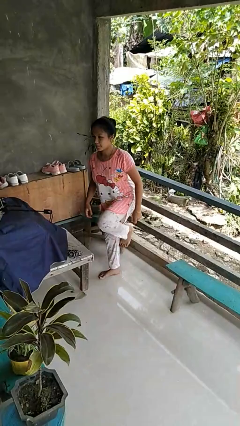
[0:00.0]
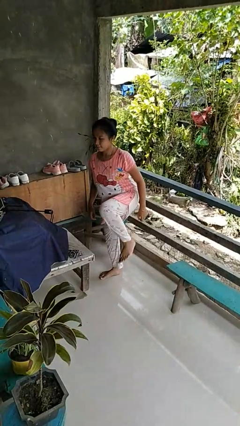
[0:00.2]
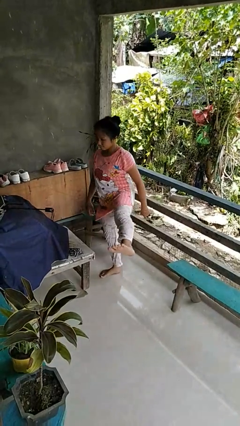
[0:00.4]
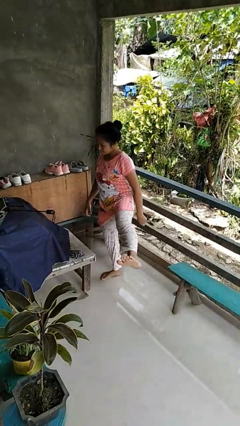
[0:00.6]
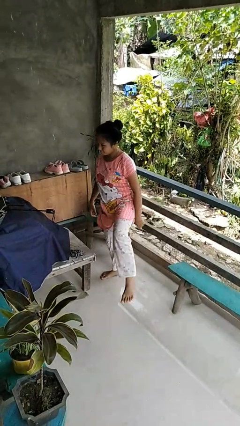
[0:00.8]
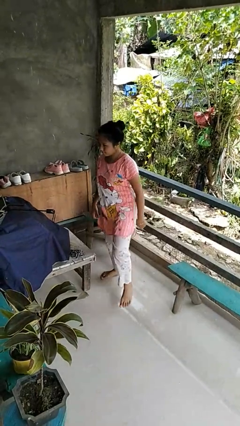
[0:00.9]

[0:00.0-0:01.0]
person karate kicks

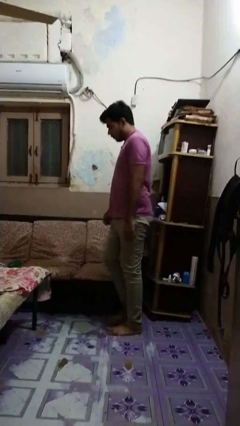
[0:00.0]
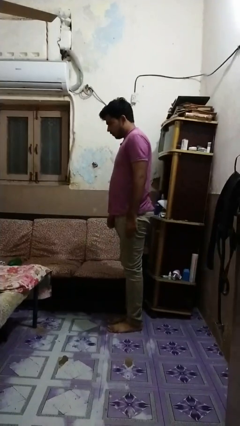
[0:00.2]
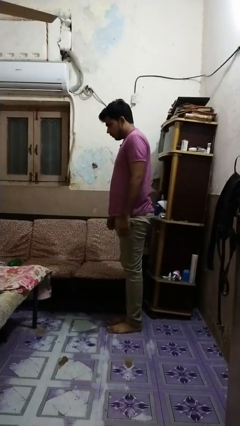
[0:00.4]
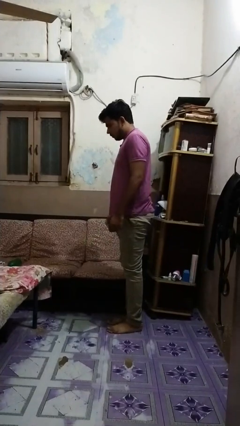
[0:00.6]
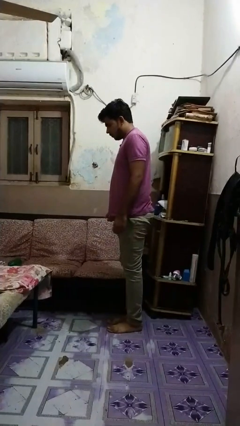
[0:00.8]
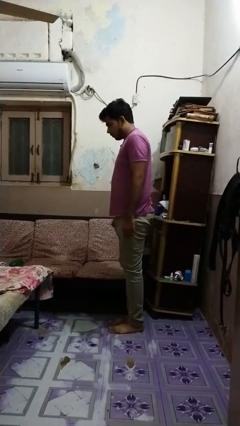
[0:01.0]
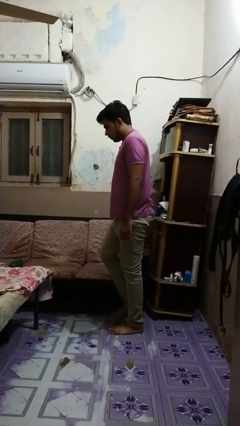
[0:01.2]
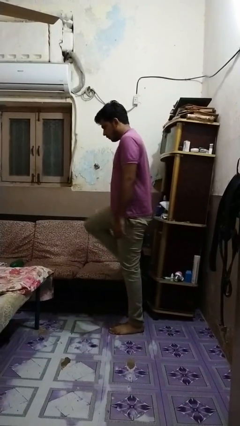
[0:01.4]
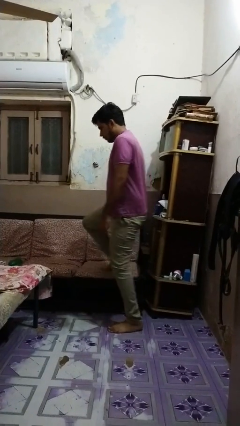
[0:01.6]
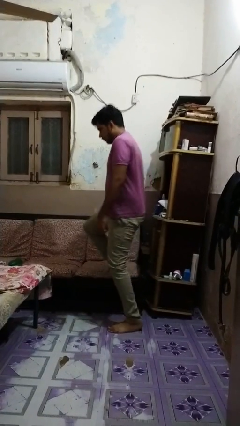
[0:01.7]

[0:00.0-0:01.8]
person climbs off couch

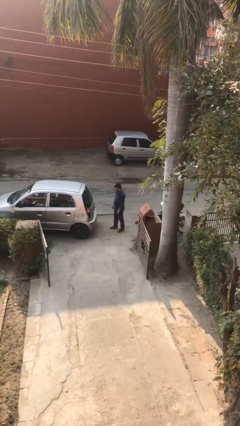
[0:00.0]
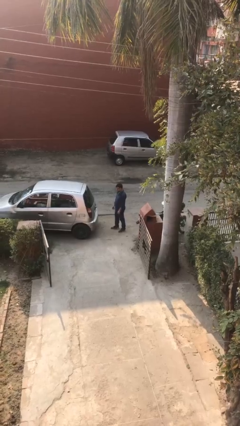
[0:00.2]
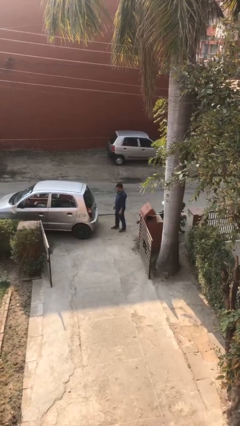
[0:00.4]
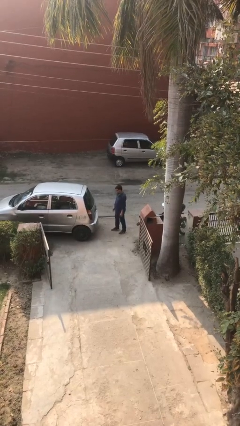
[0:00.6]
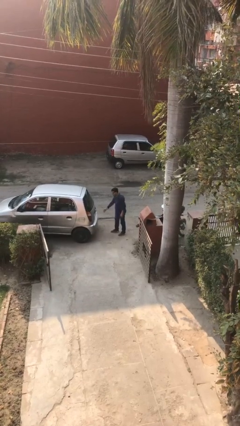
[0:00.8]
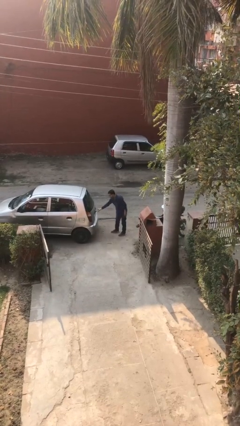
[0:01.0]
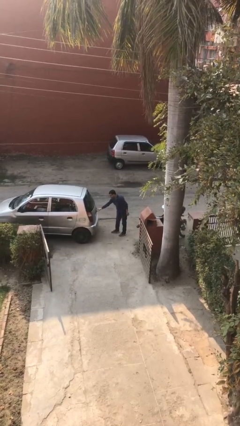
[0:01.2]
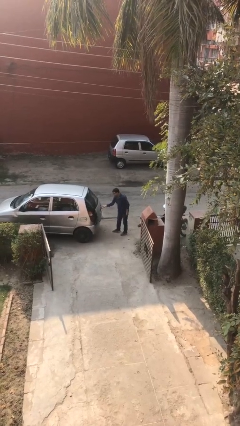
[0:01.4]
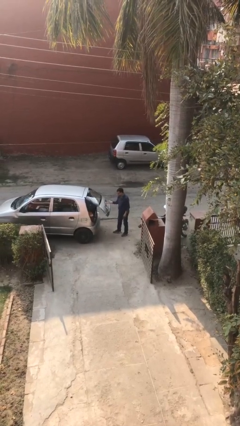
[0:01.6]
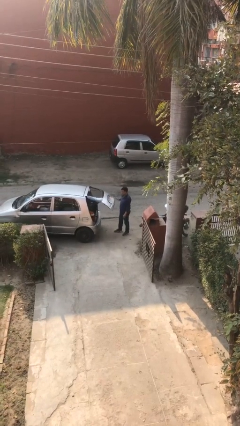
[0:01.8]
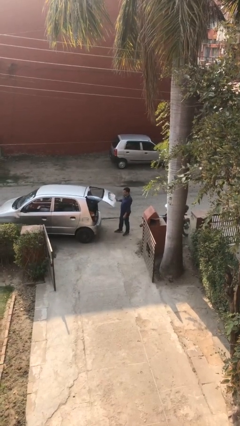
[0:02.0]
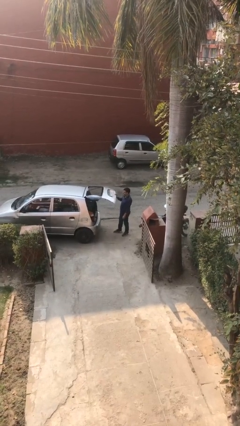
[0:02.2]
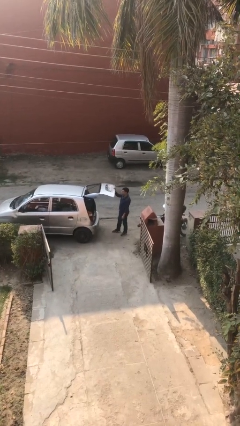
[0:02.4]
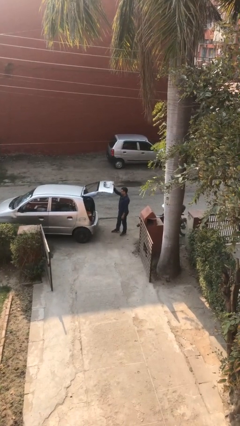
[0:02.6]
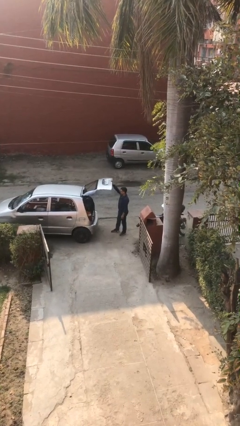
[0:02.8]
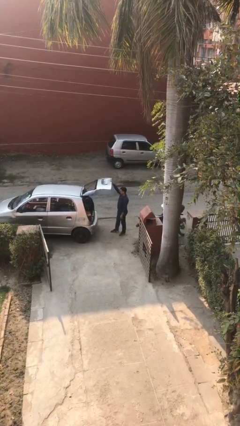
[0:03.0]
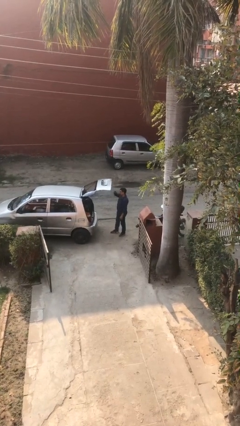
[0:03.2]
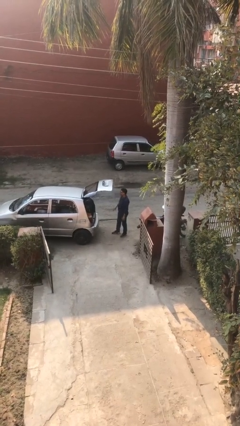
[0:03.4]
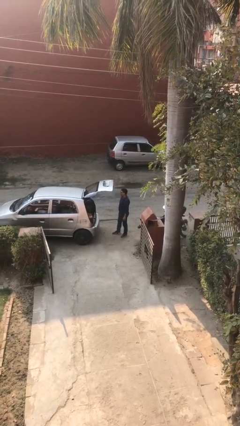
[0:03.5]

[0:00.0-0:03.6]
person opens car trunk

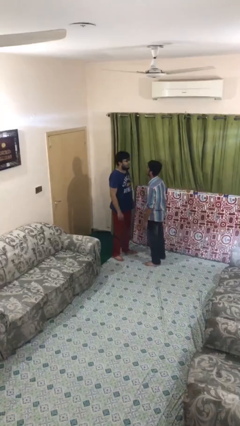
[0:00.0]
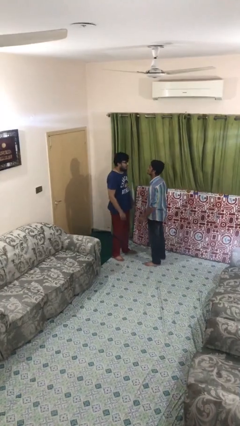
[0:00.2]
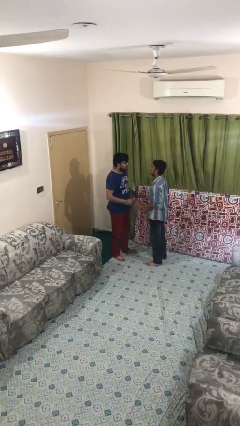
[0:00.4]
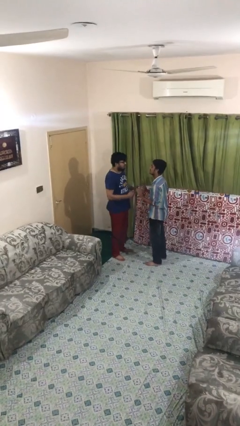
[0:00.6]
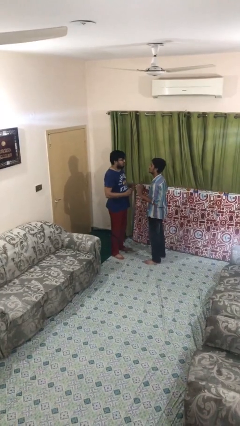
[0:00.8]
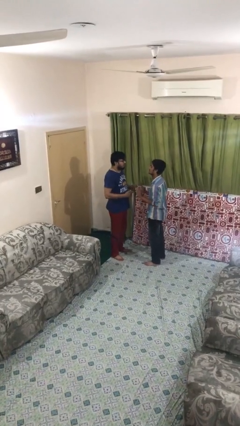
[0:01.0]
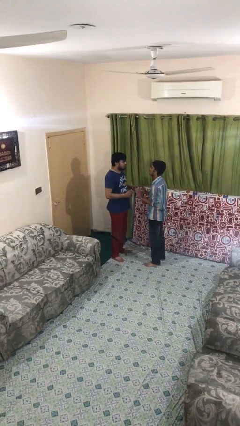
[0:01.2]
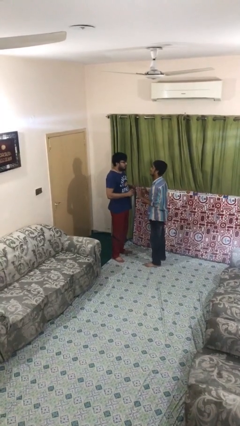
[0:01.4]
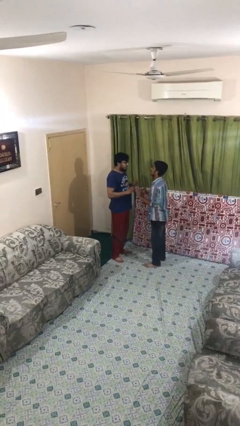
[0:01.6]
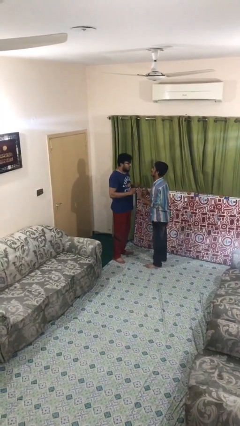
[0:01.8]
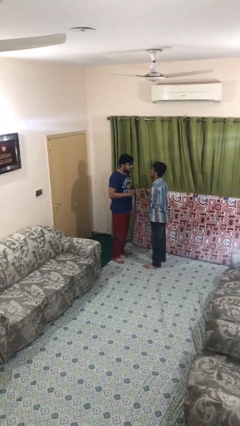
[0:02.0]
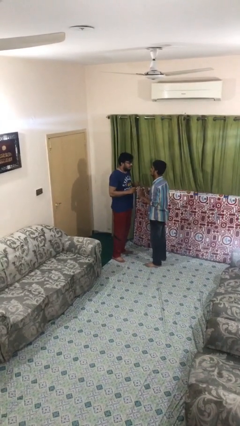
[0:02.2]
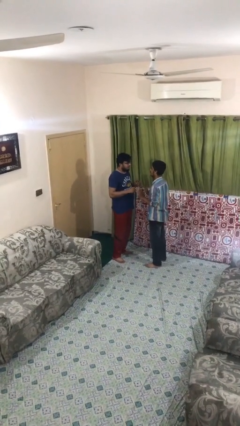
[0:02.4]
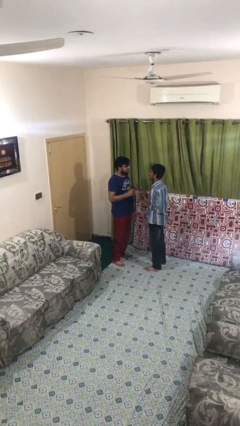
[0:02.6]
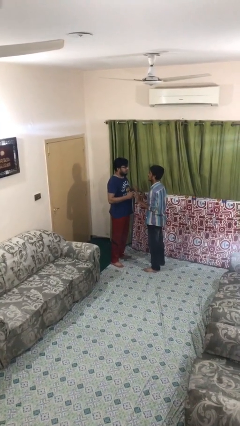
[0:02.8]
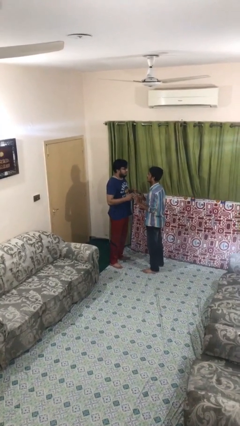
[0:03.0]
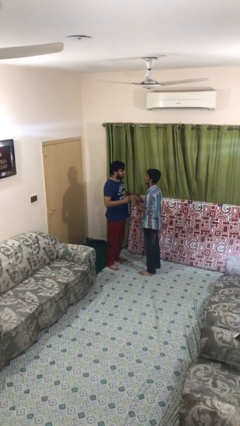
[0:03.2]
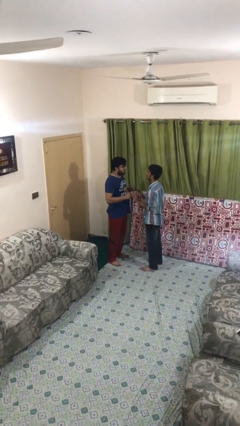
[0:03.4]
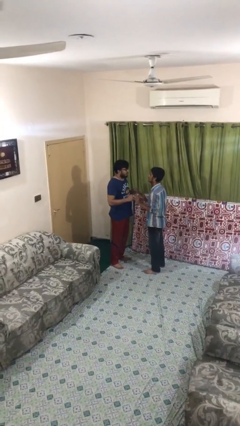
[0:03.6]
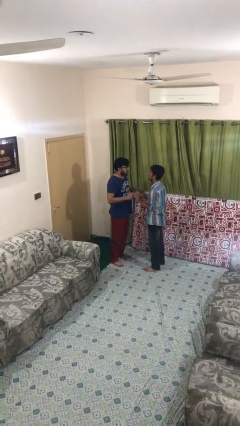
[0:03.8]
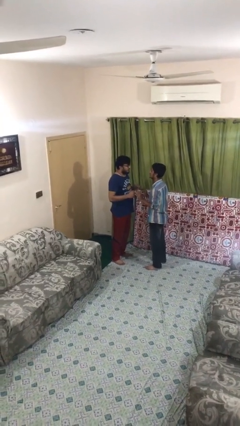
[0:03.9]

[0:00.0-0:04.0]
person talks to person

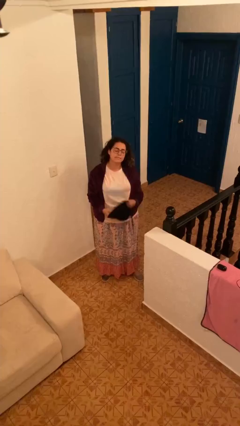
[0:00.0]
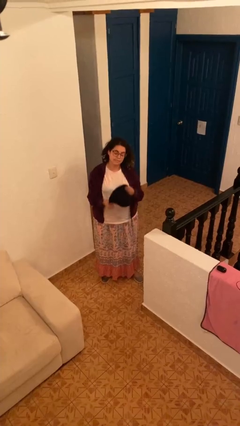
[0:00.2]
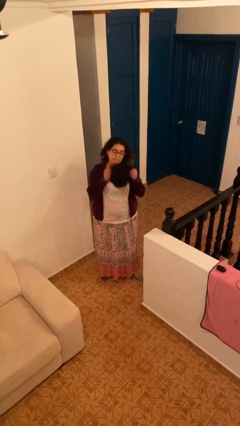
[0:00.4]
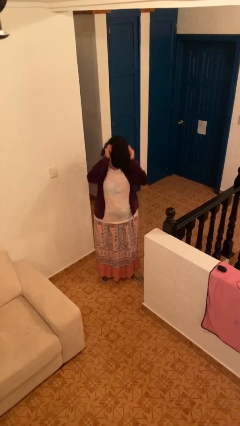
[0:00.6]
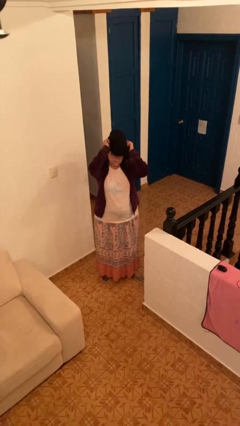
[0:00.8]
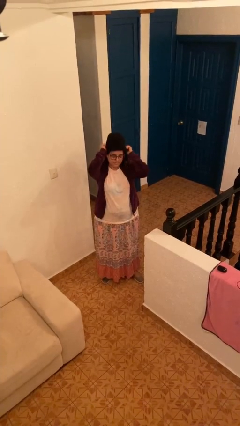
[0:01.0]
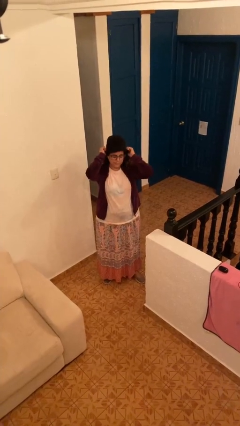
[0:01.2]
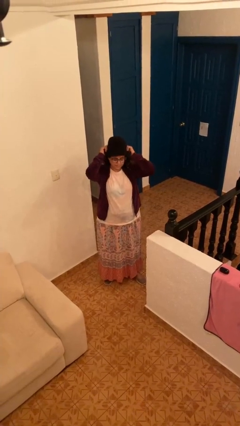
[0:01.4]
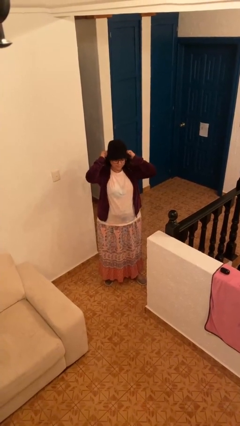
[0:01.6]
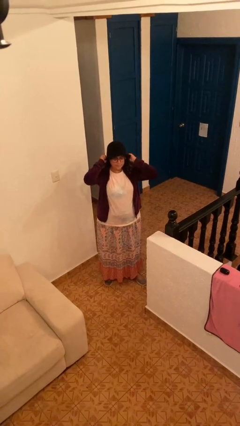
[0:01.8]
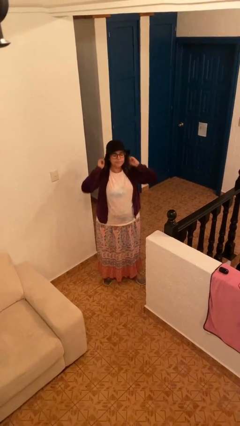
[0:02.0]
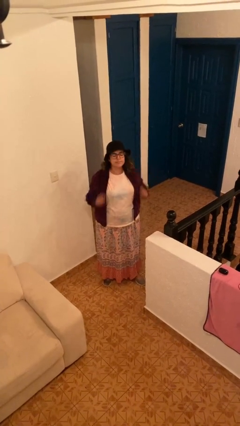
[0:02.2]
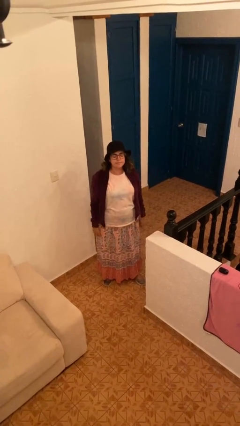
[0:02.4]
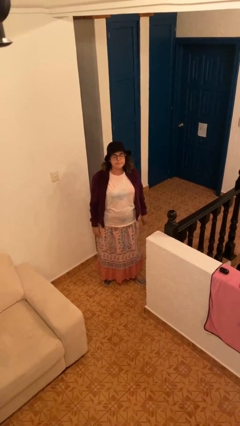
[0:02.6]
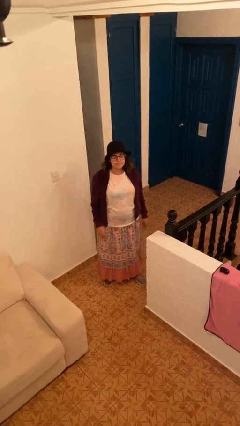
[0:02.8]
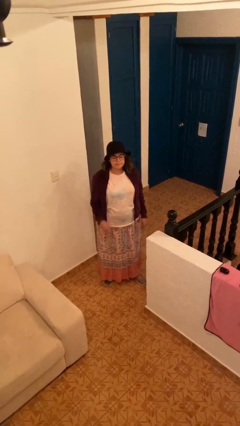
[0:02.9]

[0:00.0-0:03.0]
person puts on hat

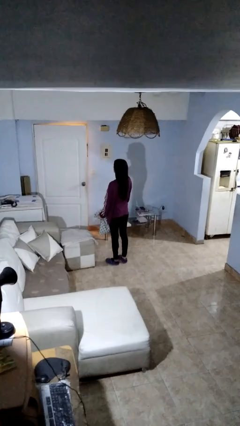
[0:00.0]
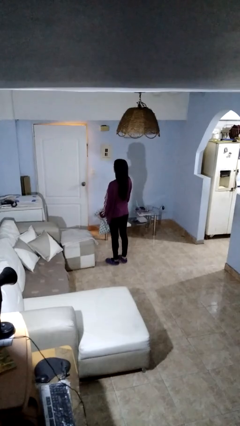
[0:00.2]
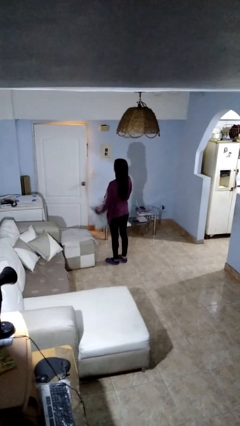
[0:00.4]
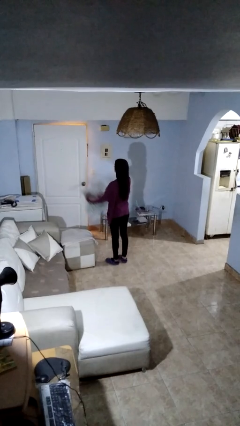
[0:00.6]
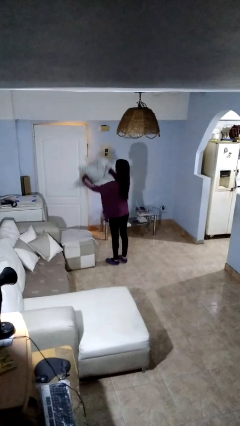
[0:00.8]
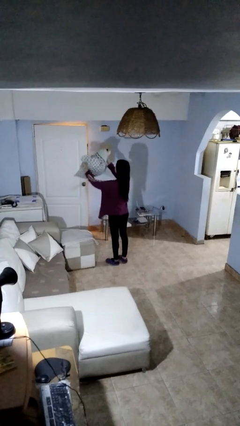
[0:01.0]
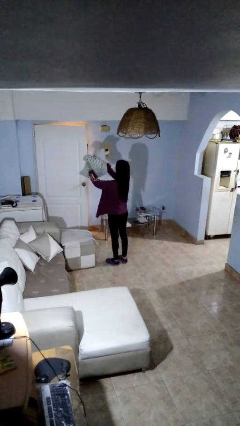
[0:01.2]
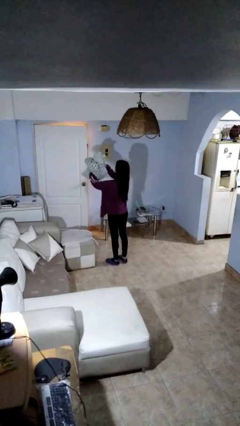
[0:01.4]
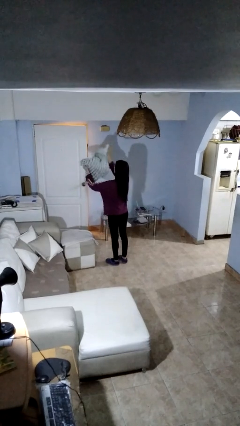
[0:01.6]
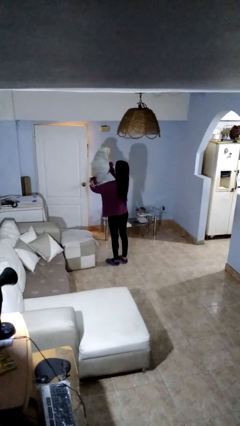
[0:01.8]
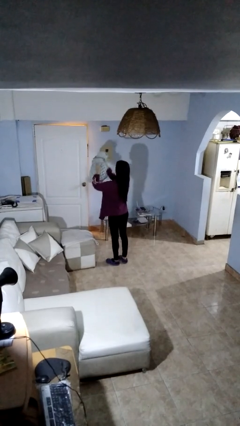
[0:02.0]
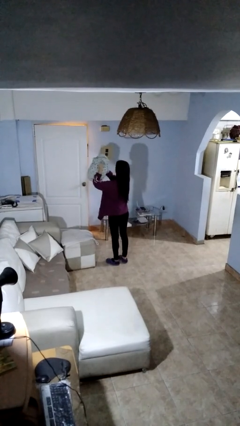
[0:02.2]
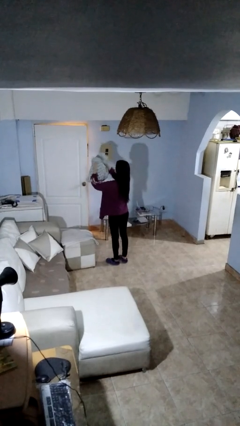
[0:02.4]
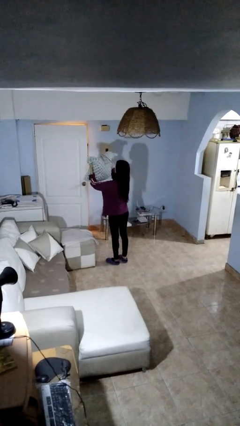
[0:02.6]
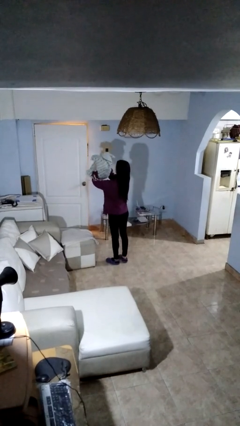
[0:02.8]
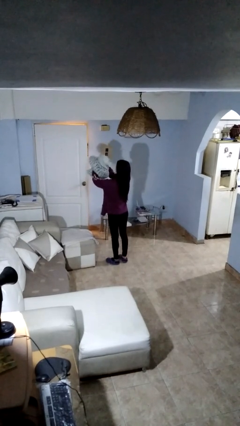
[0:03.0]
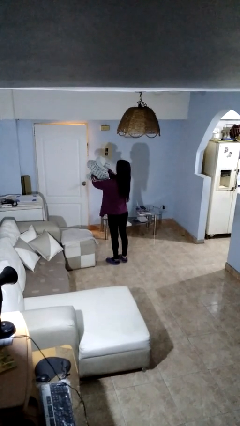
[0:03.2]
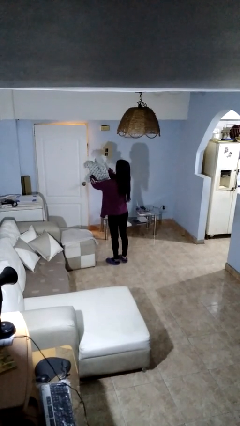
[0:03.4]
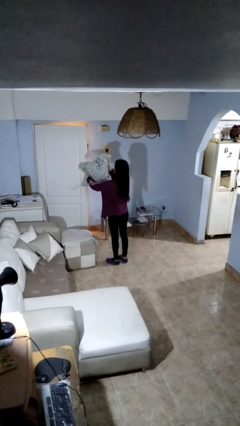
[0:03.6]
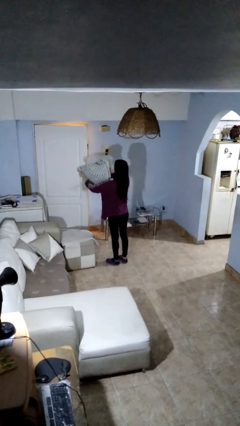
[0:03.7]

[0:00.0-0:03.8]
person squeezes object
